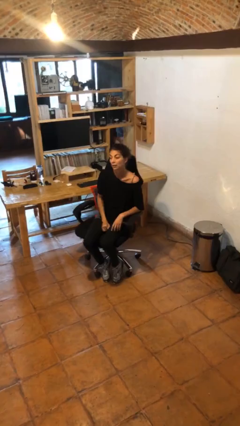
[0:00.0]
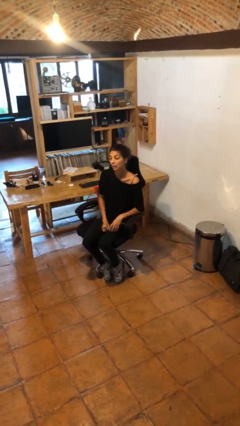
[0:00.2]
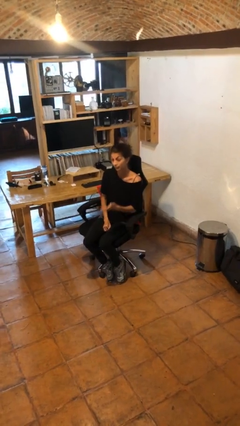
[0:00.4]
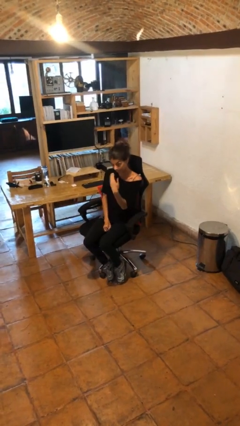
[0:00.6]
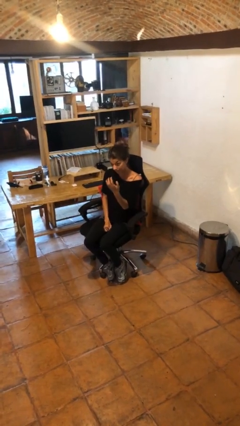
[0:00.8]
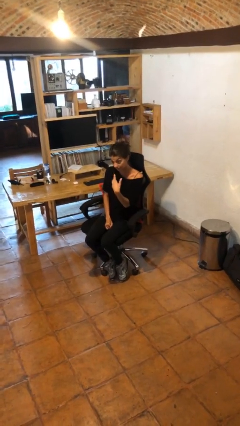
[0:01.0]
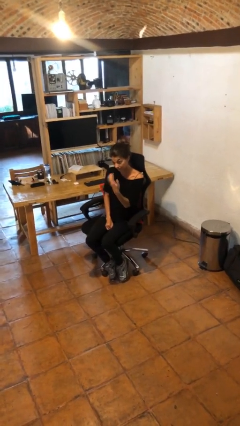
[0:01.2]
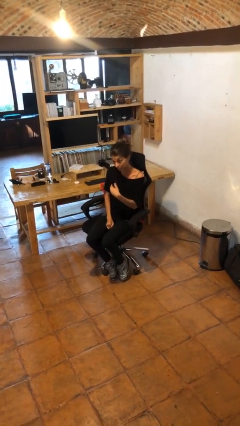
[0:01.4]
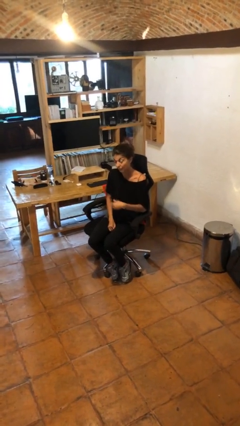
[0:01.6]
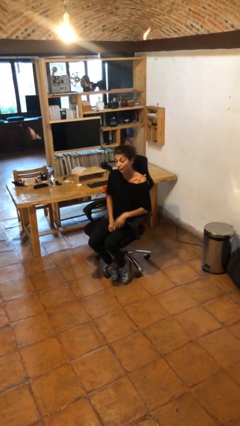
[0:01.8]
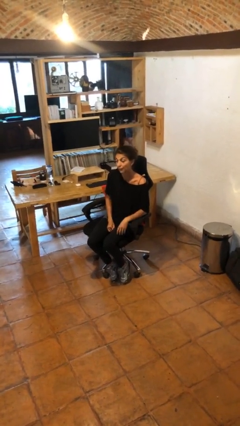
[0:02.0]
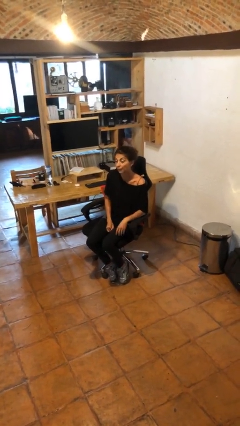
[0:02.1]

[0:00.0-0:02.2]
person gestures come here

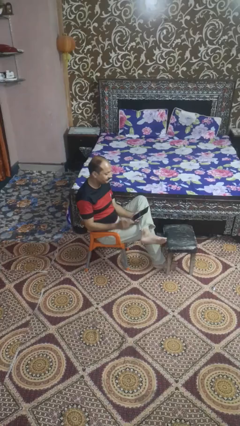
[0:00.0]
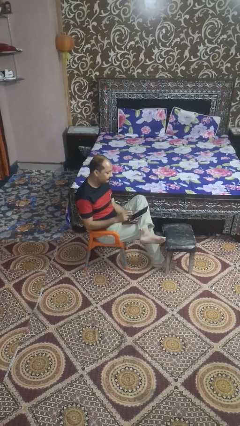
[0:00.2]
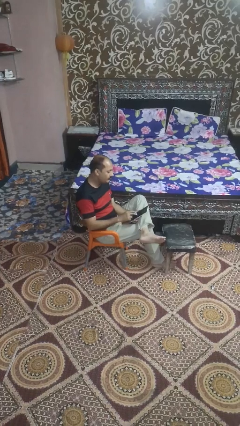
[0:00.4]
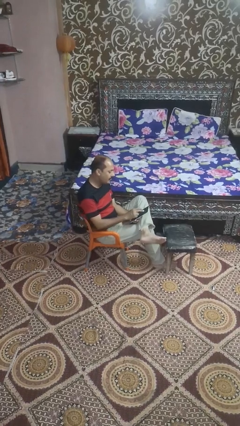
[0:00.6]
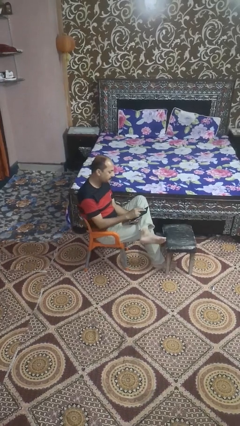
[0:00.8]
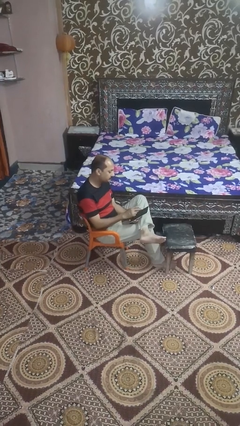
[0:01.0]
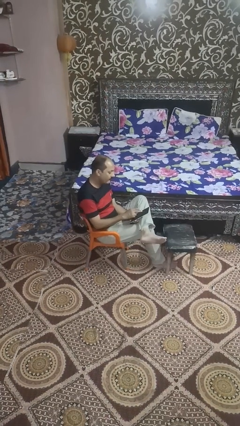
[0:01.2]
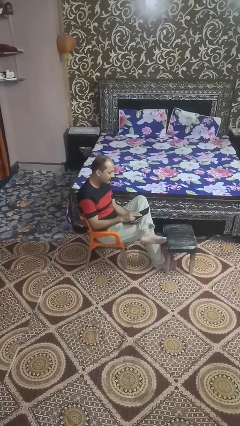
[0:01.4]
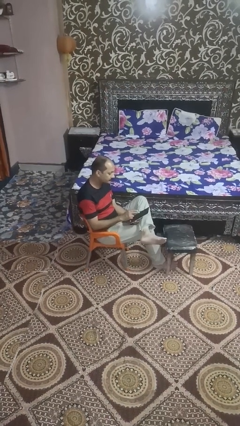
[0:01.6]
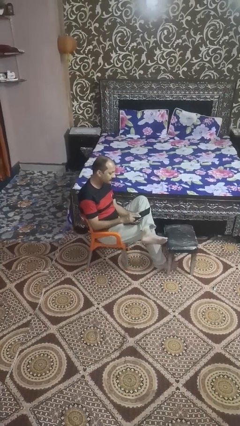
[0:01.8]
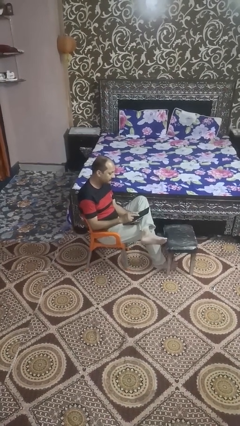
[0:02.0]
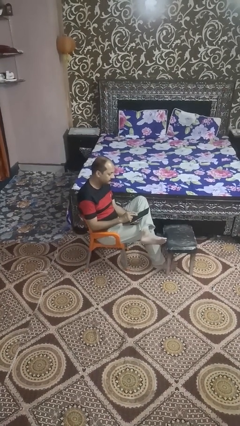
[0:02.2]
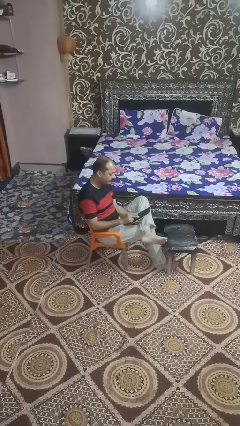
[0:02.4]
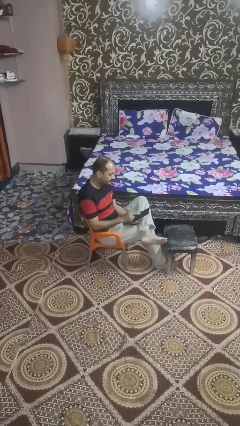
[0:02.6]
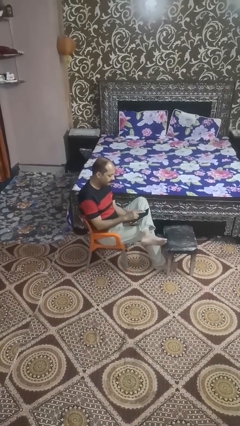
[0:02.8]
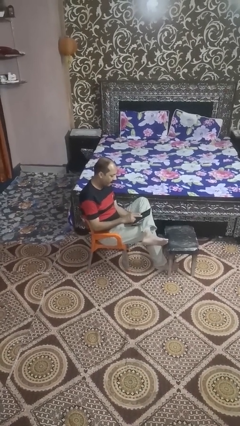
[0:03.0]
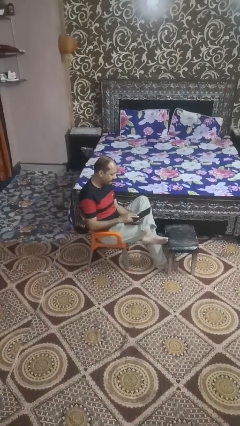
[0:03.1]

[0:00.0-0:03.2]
person interacts with tablet

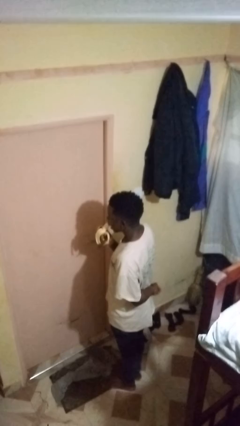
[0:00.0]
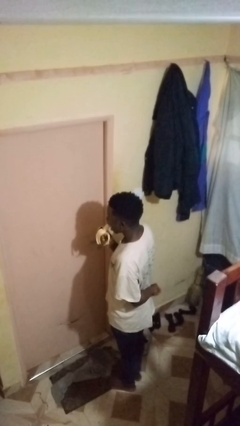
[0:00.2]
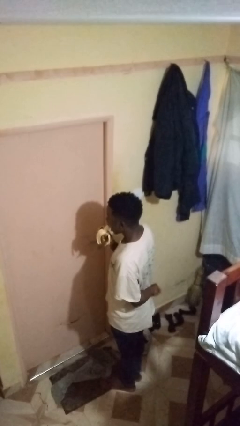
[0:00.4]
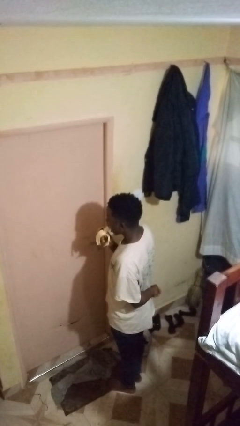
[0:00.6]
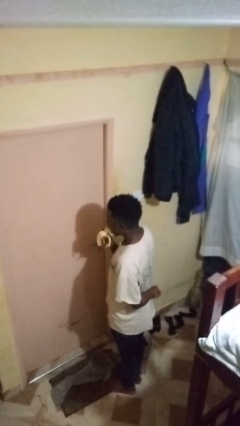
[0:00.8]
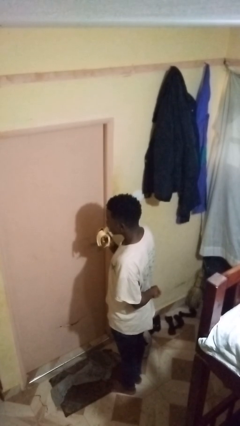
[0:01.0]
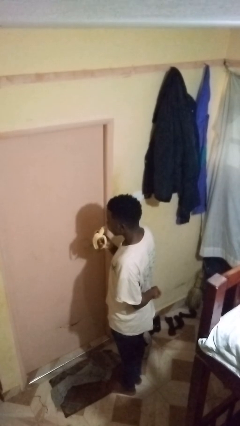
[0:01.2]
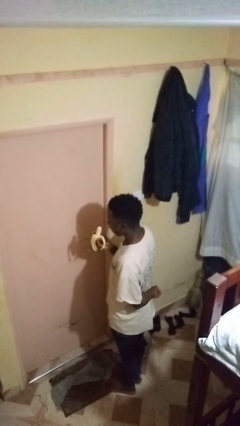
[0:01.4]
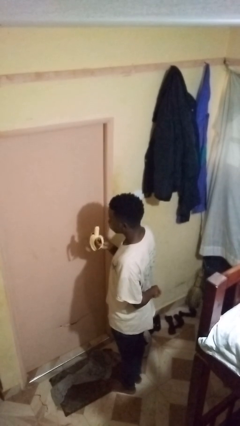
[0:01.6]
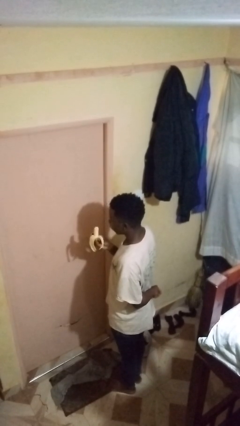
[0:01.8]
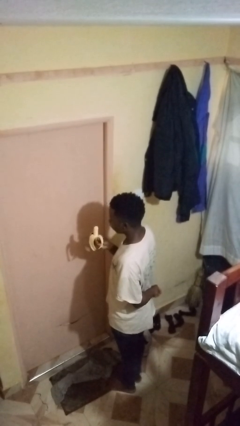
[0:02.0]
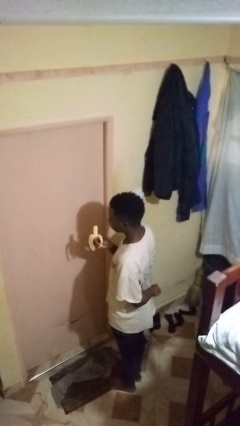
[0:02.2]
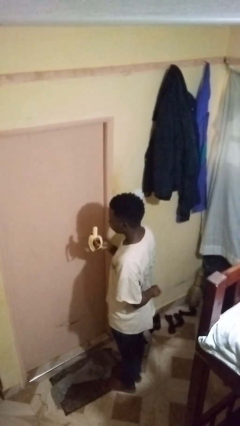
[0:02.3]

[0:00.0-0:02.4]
person eats banana

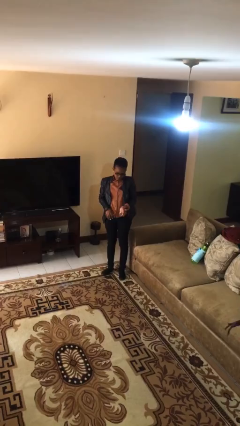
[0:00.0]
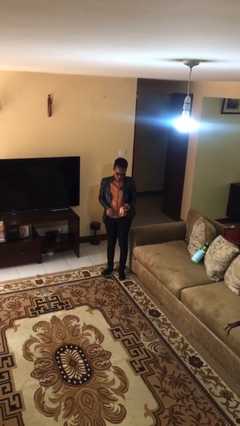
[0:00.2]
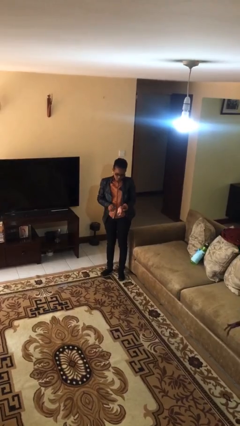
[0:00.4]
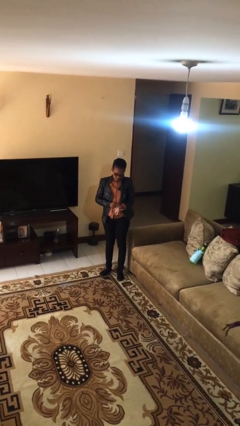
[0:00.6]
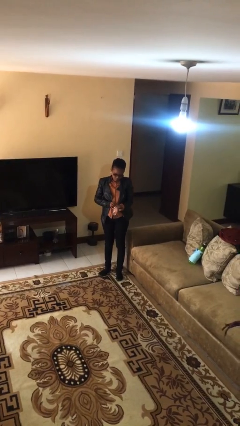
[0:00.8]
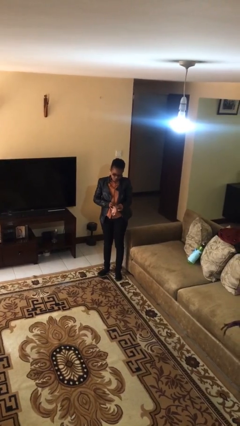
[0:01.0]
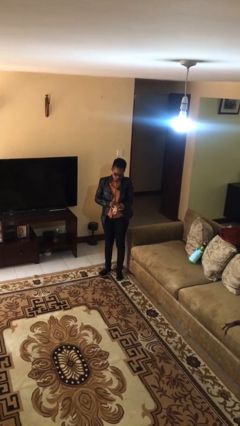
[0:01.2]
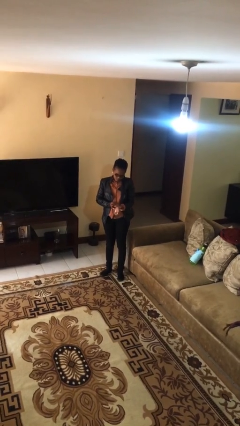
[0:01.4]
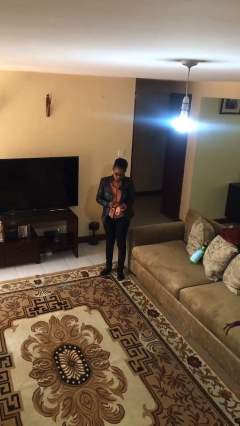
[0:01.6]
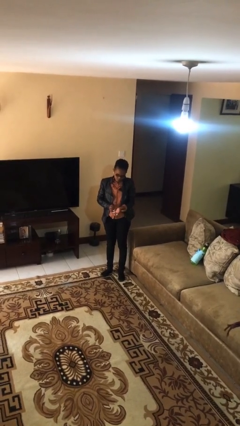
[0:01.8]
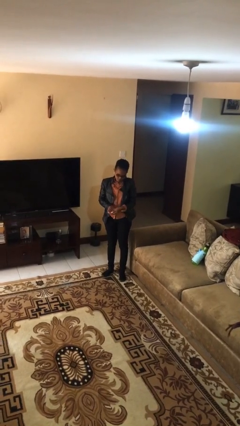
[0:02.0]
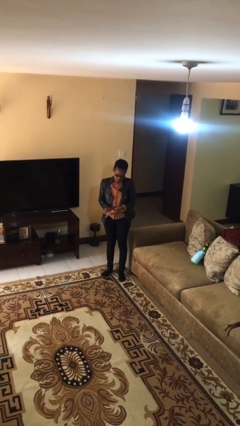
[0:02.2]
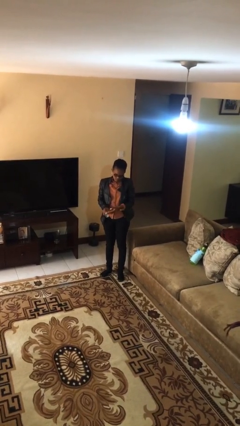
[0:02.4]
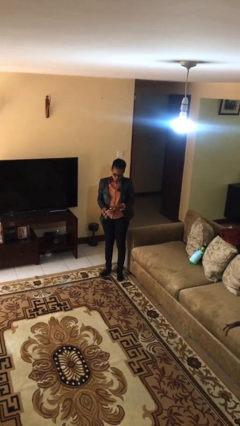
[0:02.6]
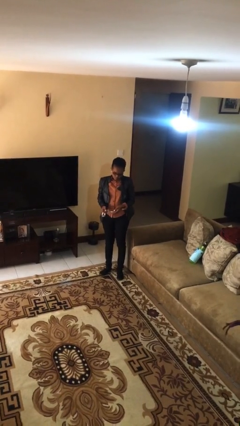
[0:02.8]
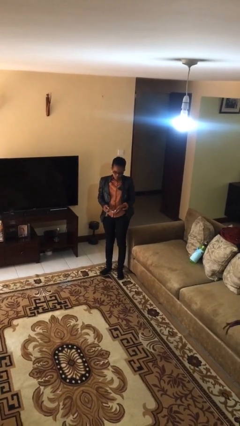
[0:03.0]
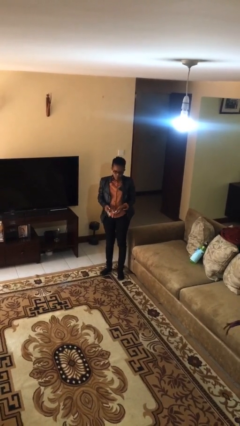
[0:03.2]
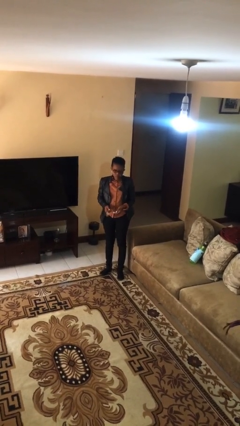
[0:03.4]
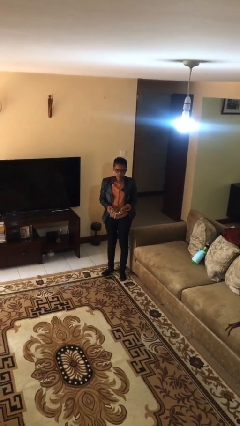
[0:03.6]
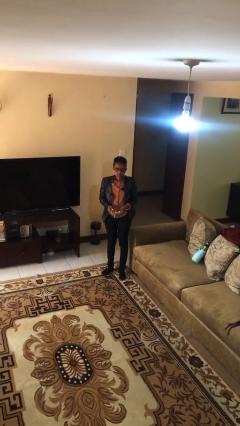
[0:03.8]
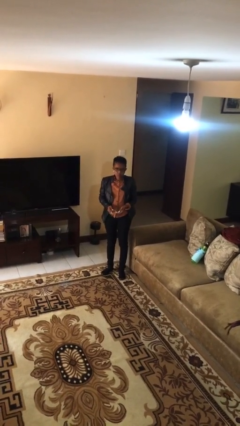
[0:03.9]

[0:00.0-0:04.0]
person takes off wristwatch

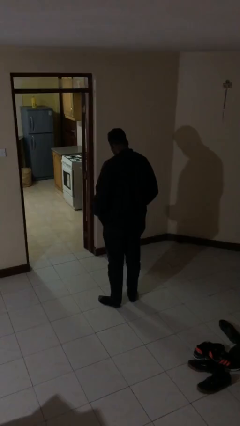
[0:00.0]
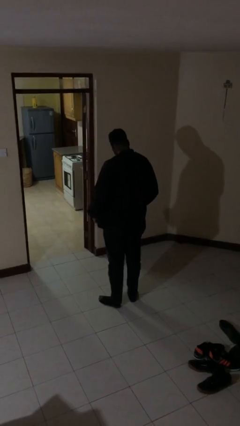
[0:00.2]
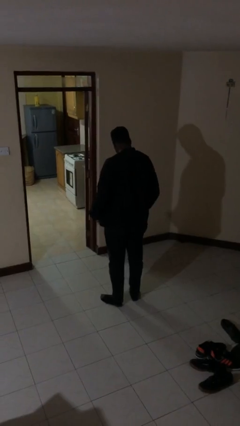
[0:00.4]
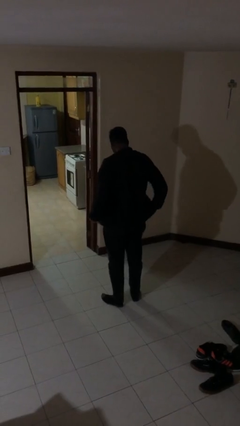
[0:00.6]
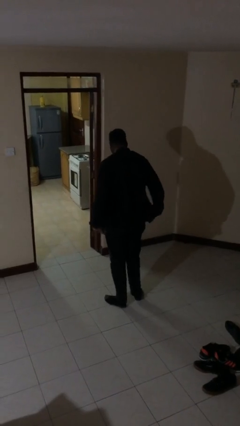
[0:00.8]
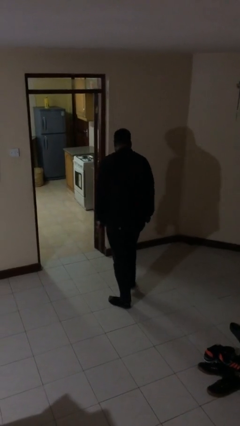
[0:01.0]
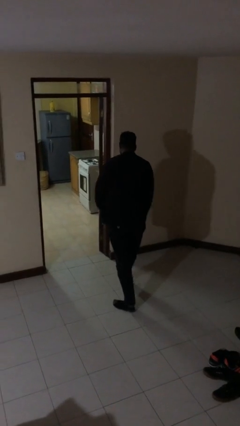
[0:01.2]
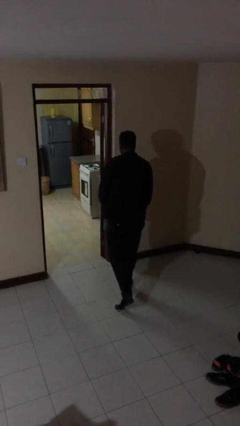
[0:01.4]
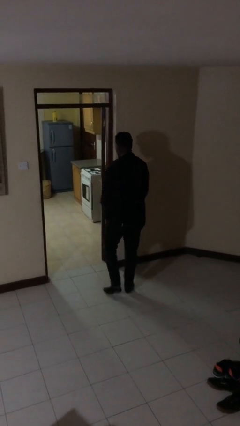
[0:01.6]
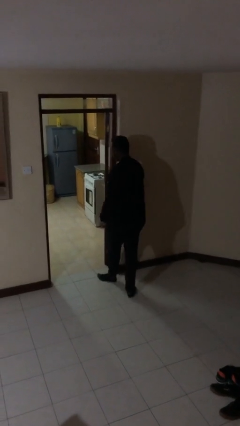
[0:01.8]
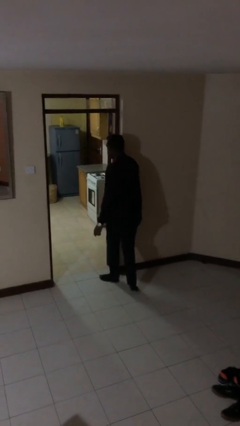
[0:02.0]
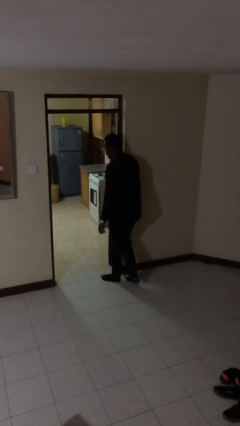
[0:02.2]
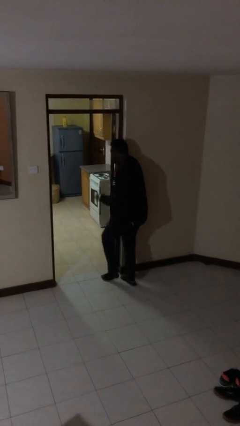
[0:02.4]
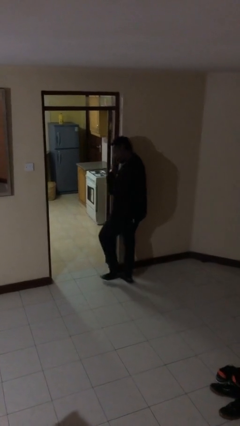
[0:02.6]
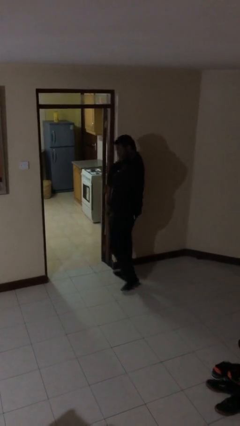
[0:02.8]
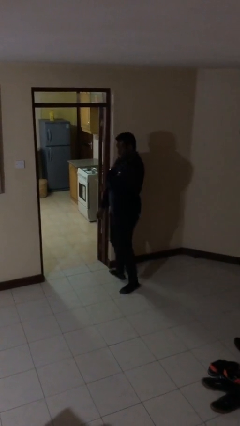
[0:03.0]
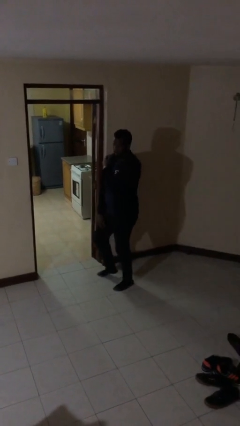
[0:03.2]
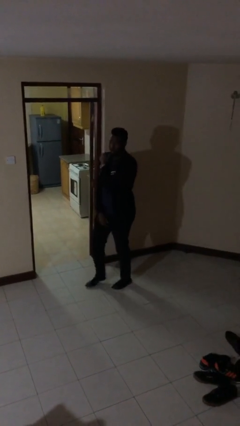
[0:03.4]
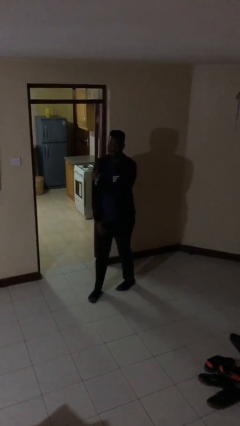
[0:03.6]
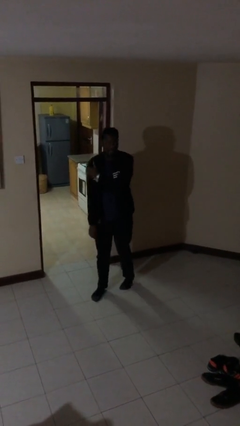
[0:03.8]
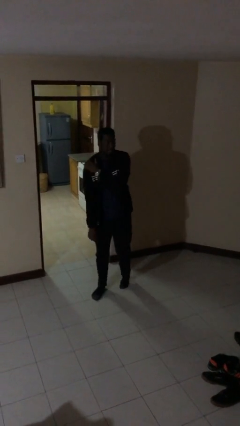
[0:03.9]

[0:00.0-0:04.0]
person bumps into wall

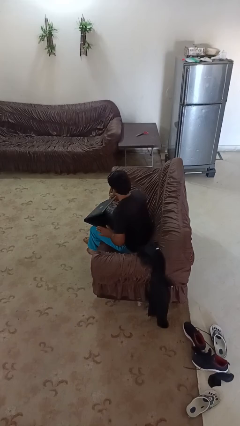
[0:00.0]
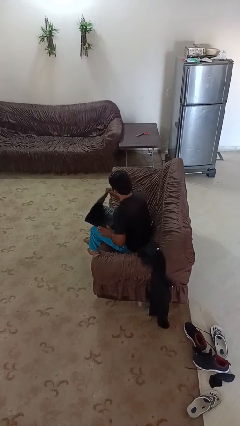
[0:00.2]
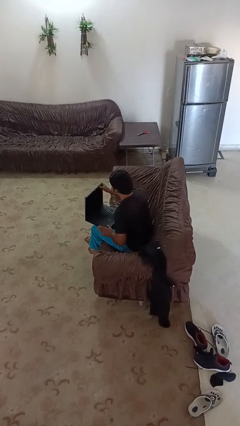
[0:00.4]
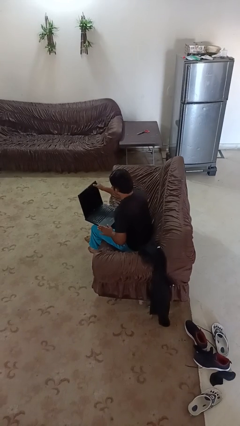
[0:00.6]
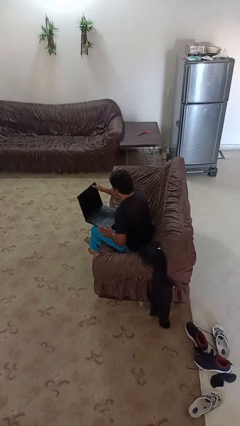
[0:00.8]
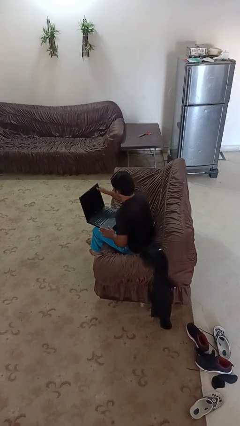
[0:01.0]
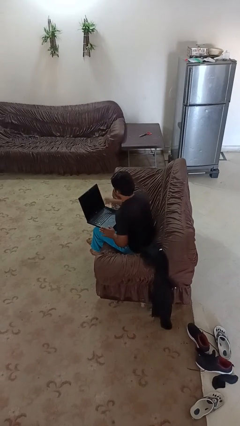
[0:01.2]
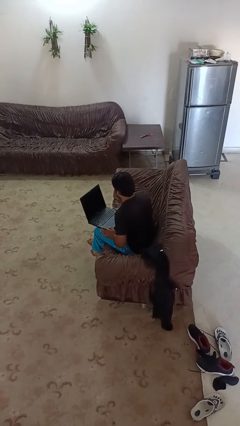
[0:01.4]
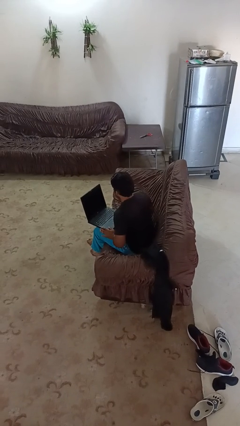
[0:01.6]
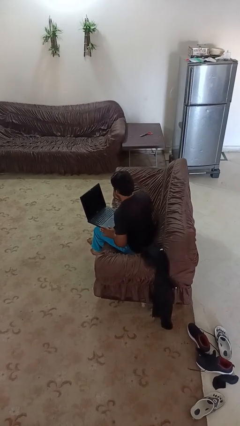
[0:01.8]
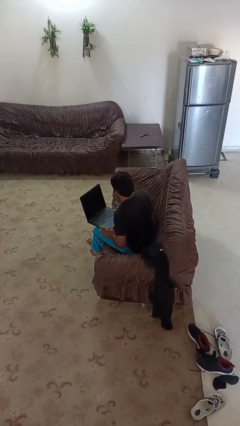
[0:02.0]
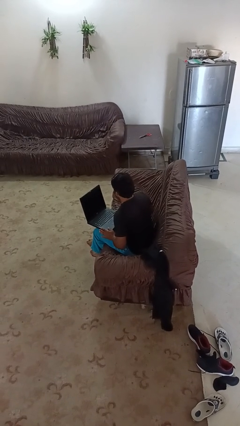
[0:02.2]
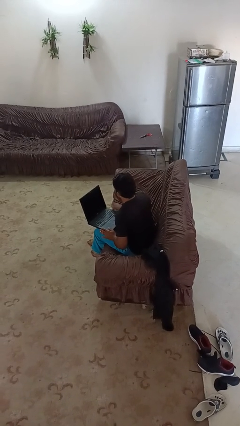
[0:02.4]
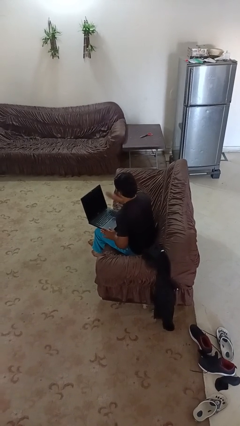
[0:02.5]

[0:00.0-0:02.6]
person opens laptop
